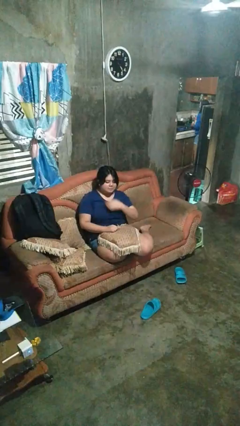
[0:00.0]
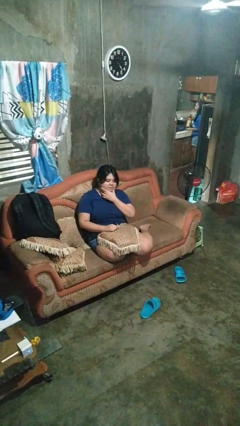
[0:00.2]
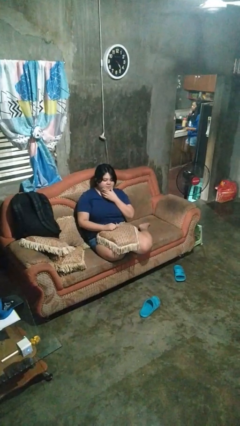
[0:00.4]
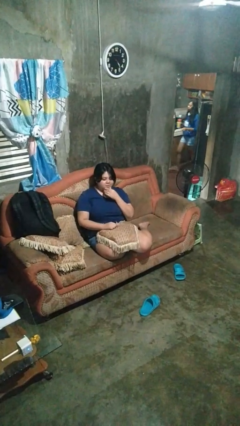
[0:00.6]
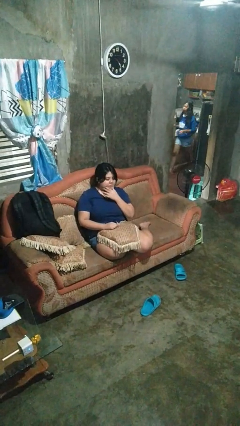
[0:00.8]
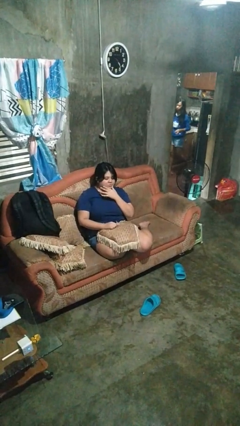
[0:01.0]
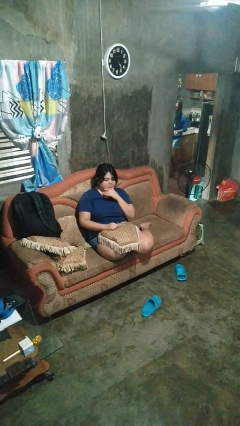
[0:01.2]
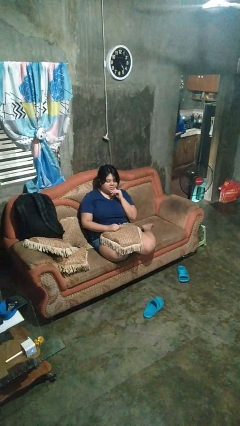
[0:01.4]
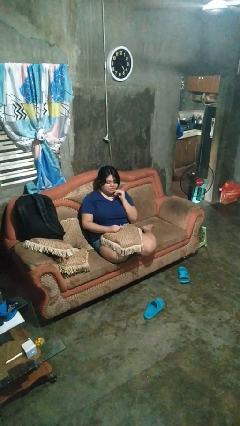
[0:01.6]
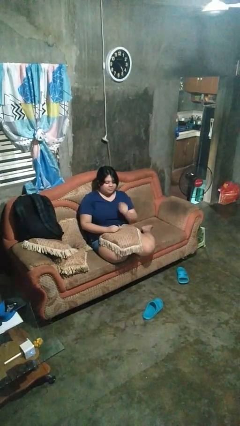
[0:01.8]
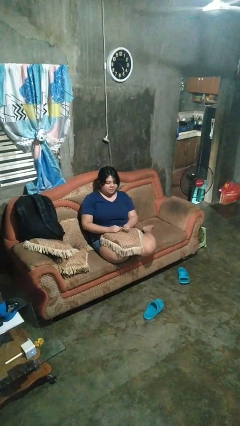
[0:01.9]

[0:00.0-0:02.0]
person strokes chin

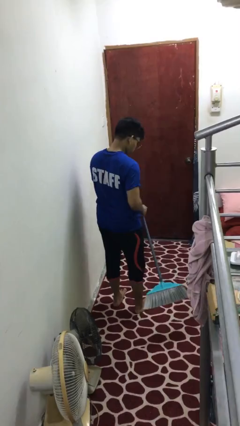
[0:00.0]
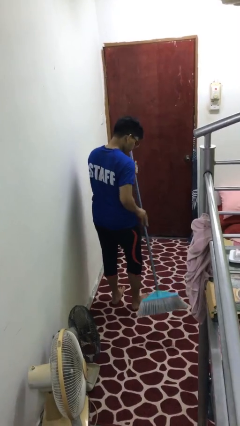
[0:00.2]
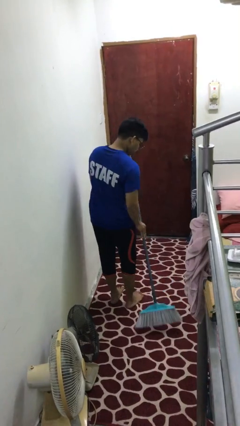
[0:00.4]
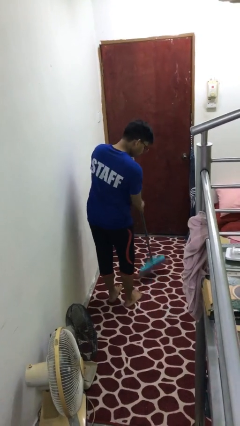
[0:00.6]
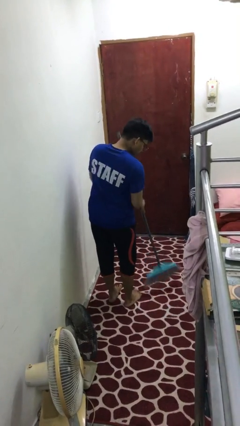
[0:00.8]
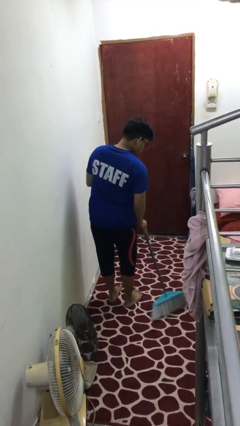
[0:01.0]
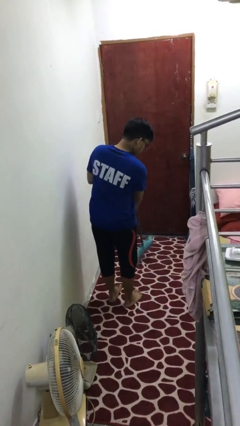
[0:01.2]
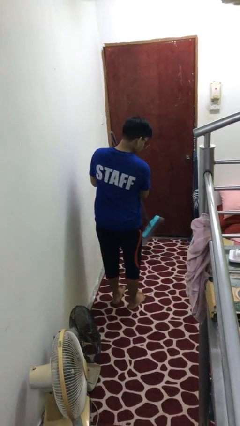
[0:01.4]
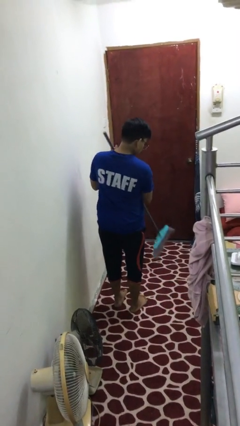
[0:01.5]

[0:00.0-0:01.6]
person sweeps floor

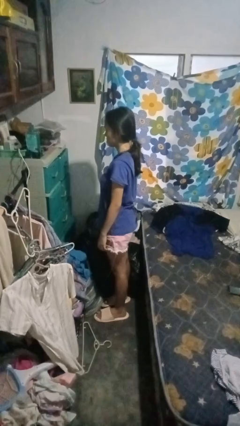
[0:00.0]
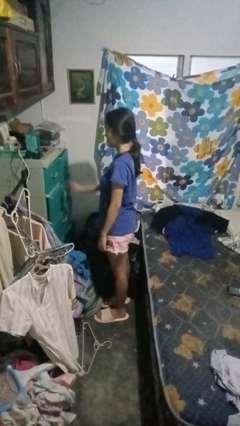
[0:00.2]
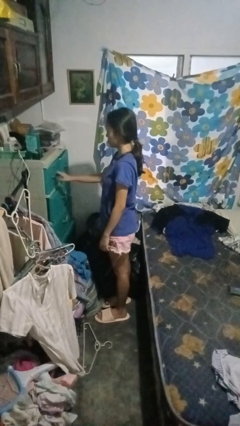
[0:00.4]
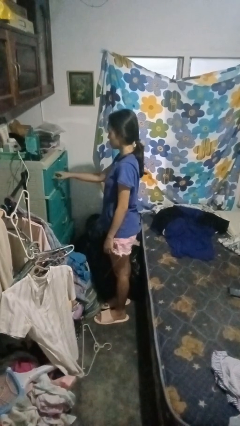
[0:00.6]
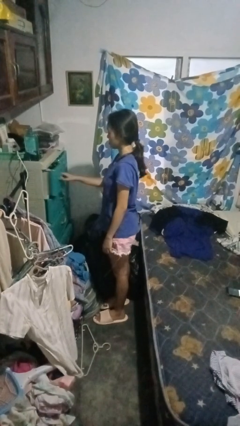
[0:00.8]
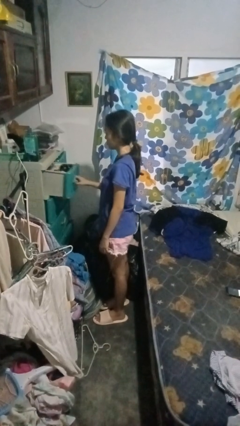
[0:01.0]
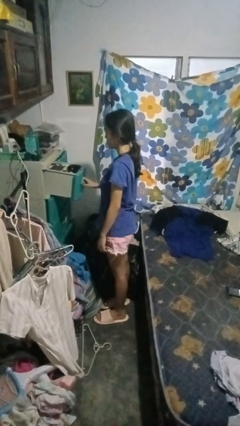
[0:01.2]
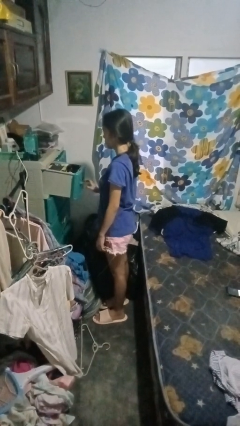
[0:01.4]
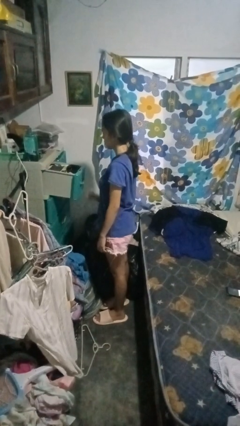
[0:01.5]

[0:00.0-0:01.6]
person opens dresser drawer

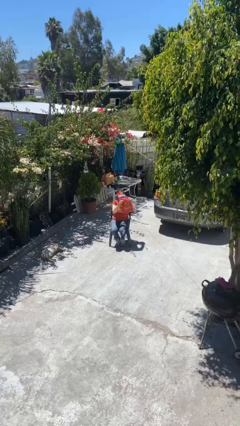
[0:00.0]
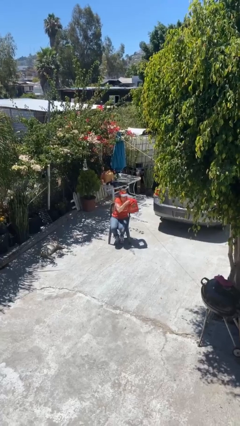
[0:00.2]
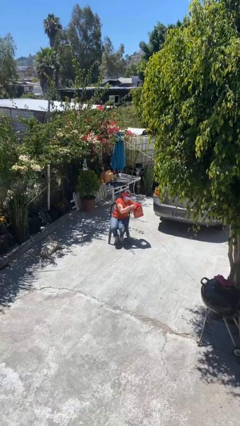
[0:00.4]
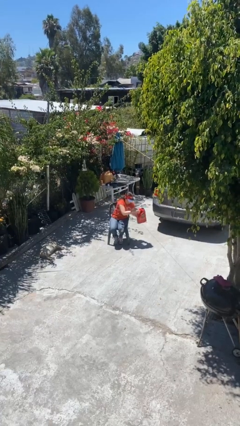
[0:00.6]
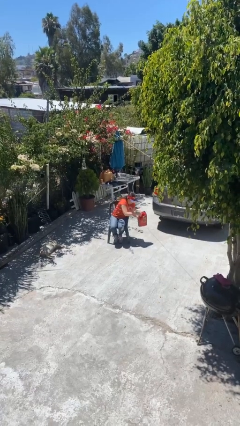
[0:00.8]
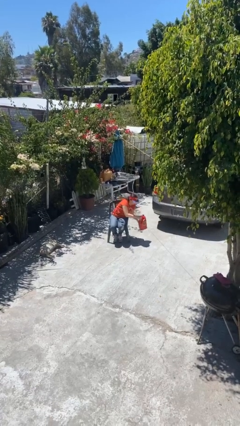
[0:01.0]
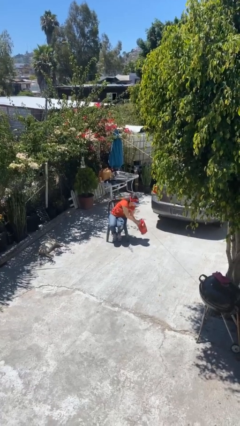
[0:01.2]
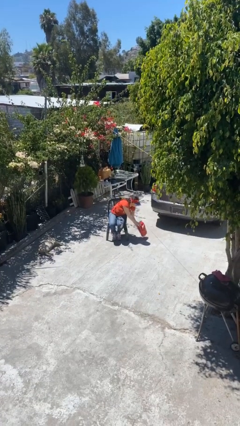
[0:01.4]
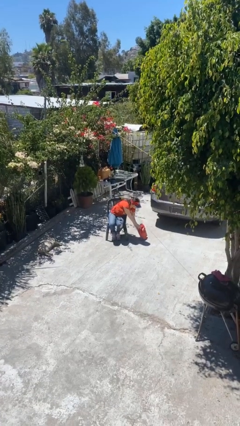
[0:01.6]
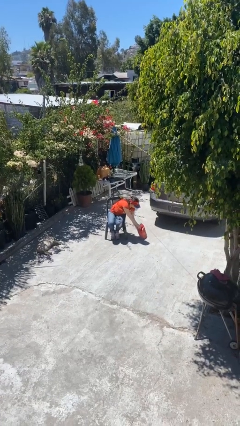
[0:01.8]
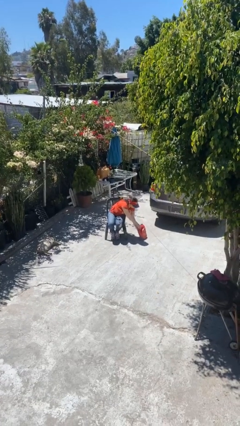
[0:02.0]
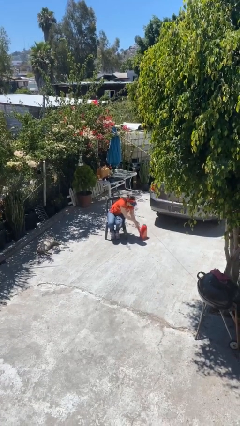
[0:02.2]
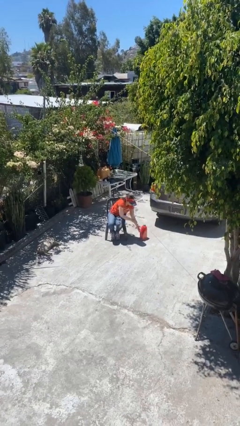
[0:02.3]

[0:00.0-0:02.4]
person puts down object on floor

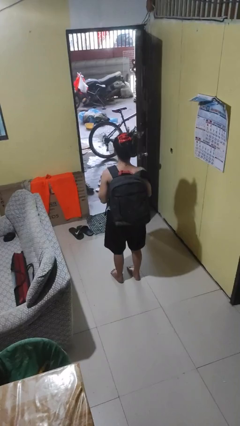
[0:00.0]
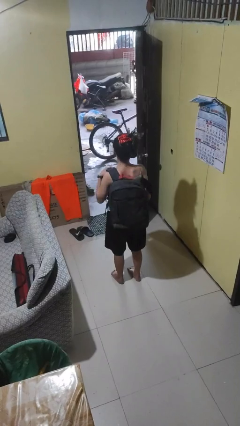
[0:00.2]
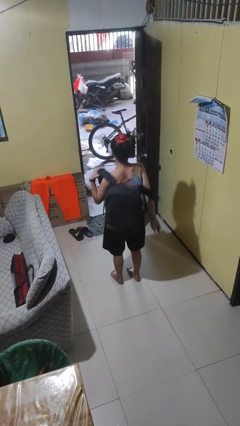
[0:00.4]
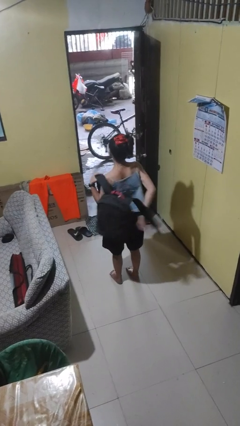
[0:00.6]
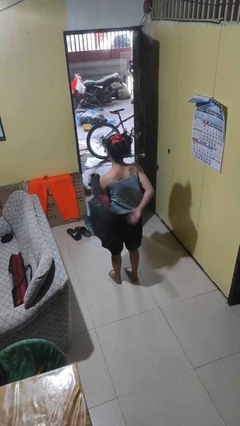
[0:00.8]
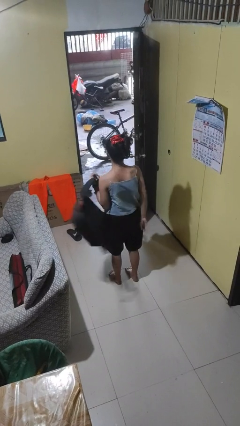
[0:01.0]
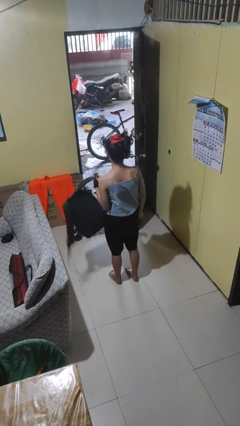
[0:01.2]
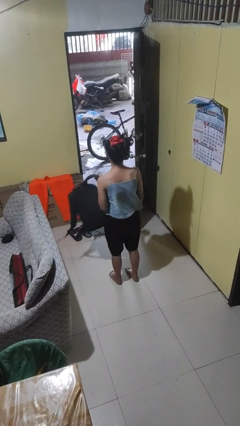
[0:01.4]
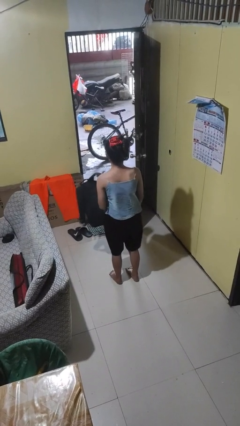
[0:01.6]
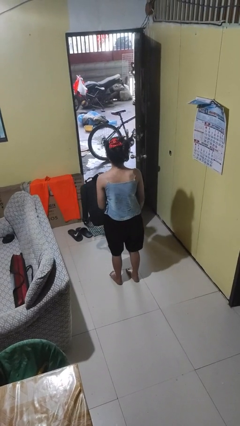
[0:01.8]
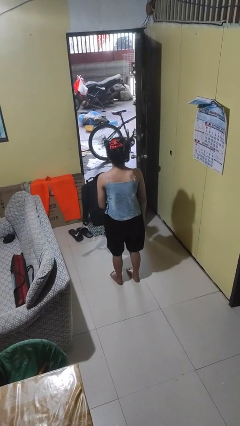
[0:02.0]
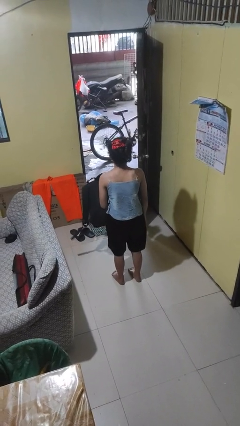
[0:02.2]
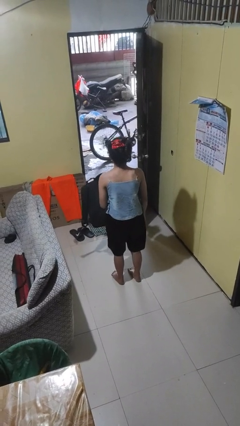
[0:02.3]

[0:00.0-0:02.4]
person takes off backpack

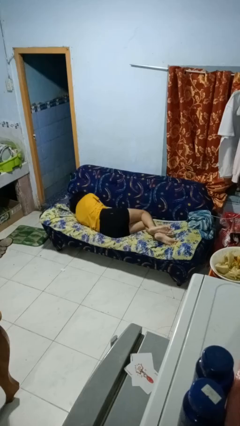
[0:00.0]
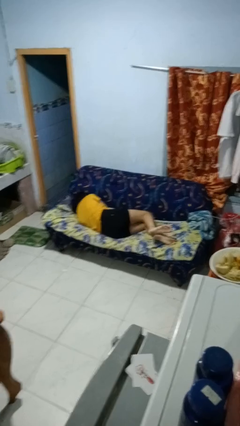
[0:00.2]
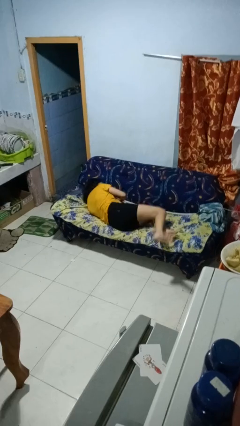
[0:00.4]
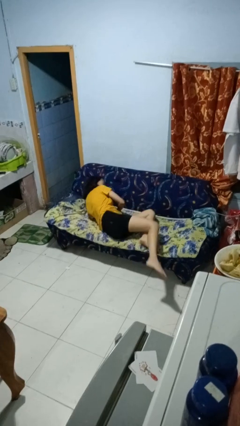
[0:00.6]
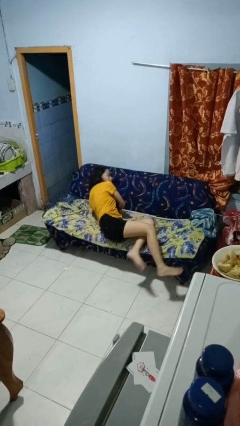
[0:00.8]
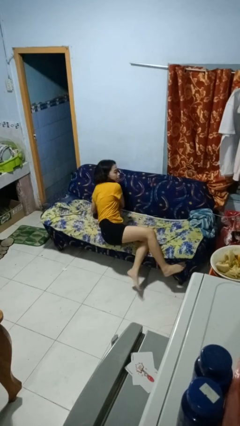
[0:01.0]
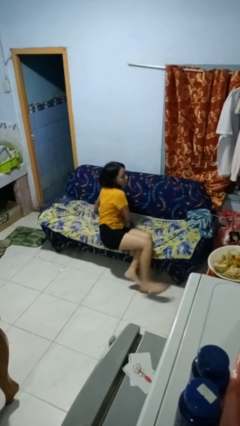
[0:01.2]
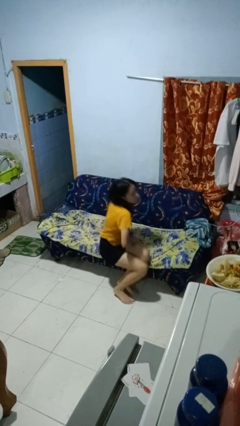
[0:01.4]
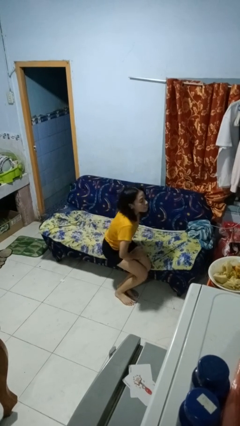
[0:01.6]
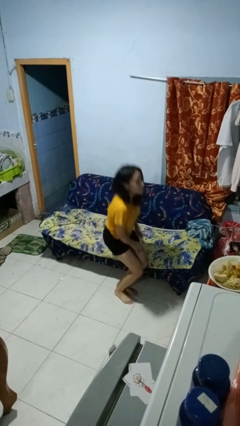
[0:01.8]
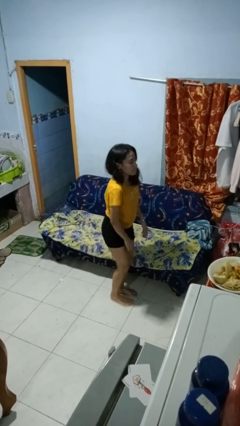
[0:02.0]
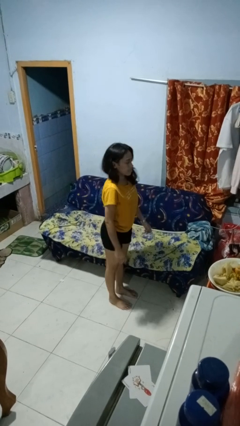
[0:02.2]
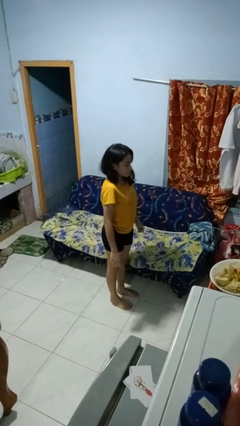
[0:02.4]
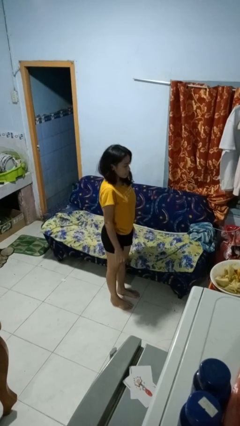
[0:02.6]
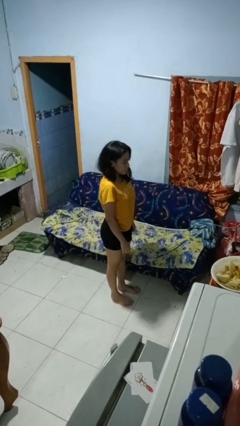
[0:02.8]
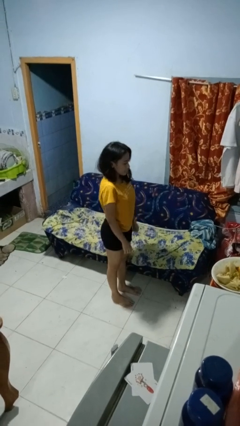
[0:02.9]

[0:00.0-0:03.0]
person stands up

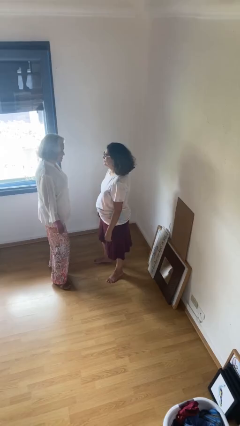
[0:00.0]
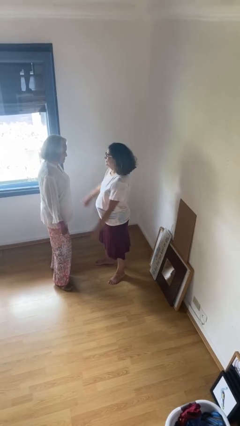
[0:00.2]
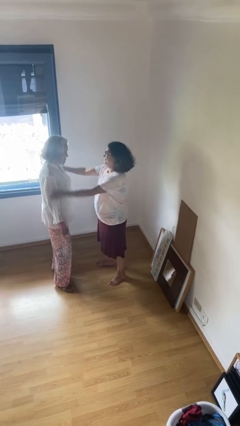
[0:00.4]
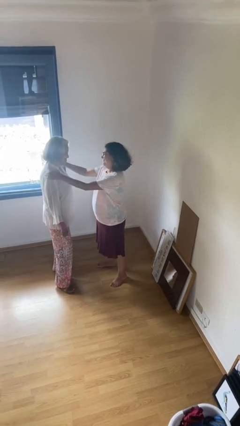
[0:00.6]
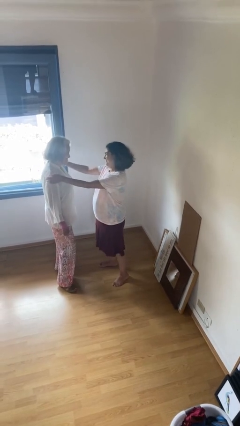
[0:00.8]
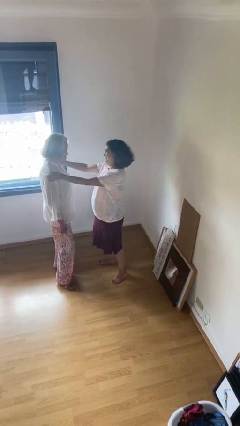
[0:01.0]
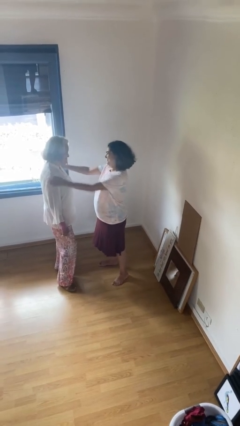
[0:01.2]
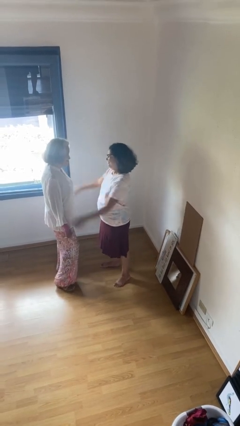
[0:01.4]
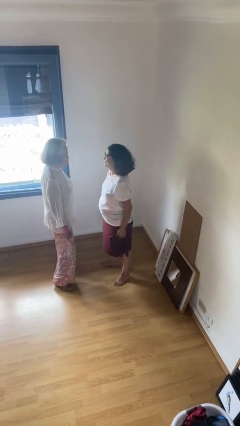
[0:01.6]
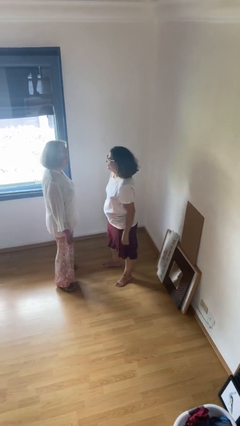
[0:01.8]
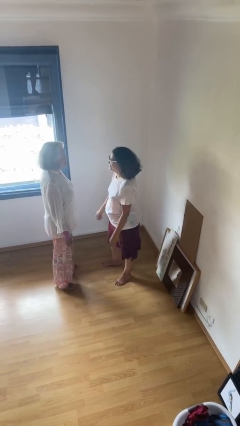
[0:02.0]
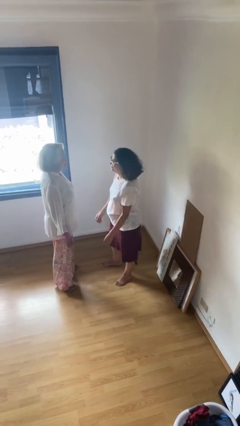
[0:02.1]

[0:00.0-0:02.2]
person pounds shoulders of person

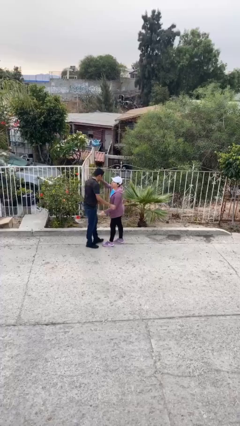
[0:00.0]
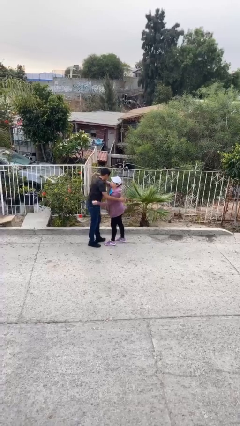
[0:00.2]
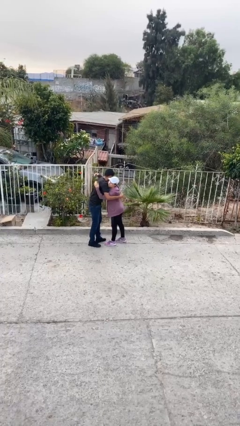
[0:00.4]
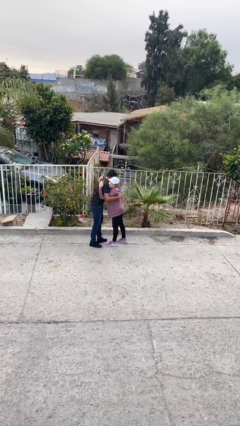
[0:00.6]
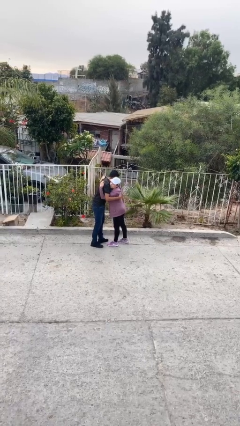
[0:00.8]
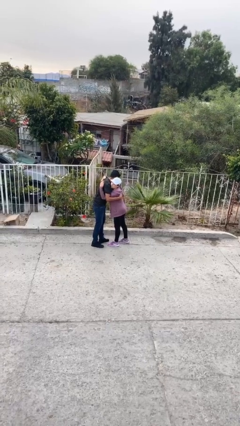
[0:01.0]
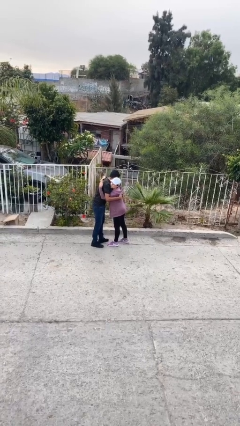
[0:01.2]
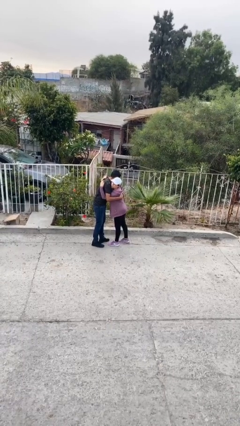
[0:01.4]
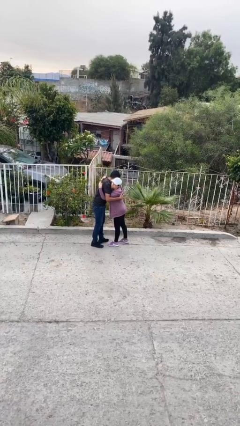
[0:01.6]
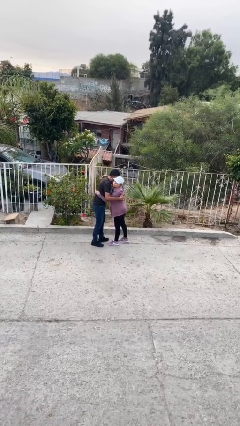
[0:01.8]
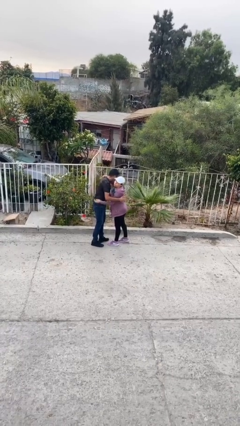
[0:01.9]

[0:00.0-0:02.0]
person embraces person
